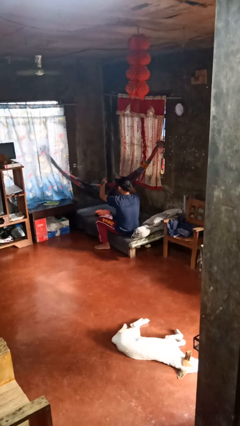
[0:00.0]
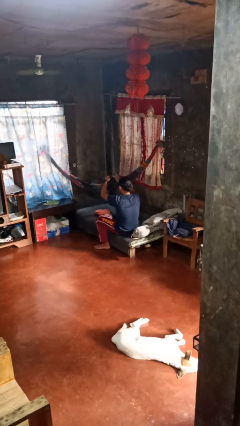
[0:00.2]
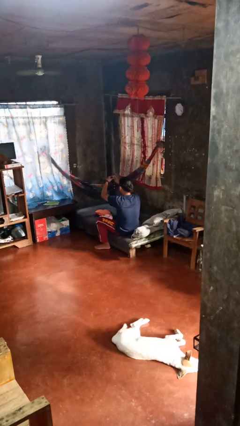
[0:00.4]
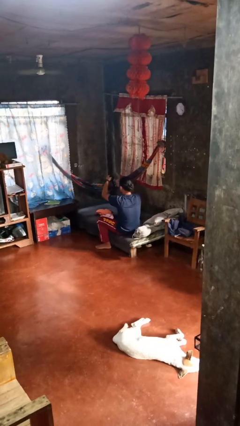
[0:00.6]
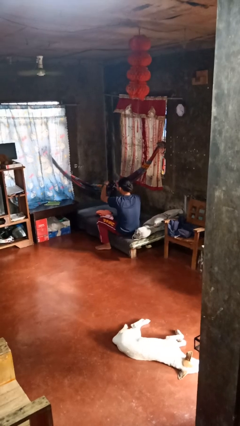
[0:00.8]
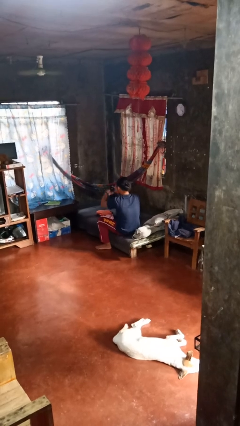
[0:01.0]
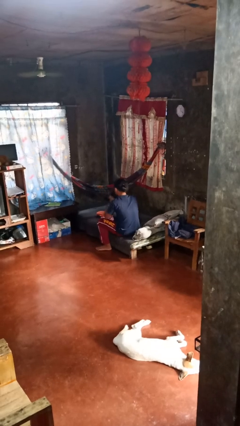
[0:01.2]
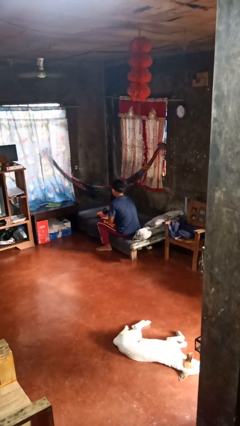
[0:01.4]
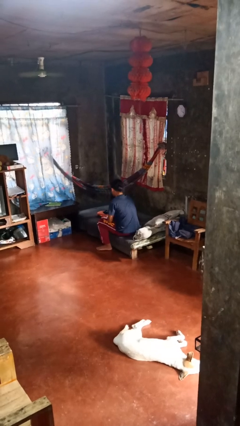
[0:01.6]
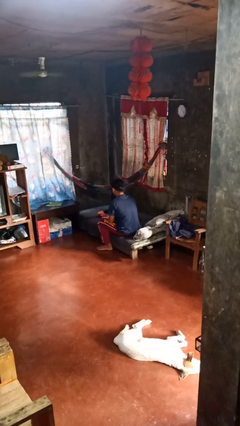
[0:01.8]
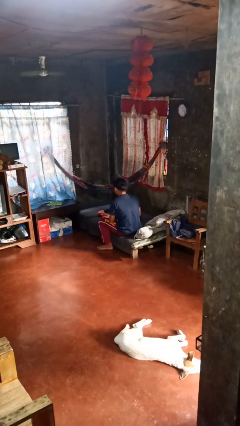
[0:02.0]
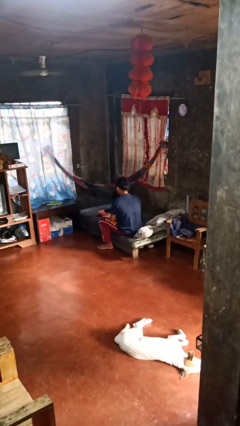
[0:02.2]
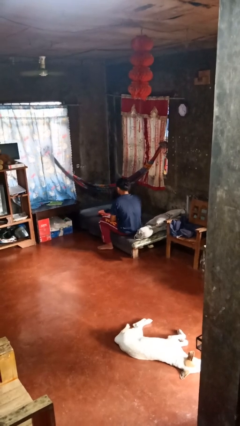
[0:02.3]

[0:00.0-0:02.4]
person folds socks

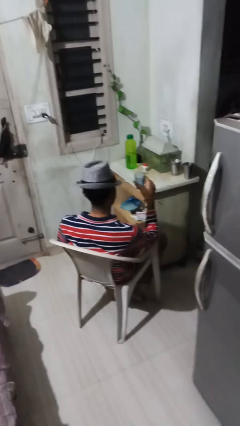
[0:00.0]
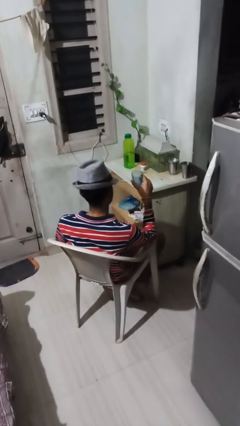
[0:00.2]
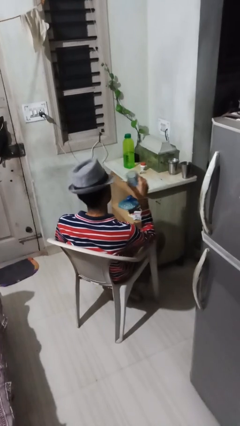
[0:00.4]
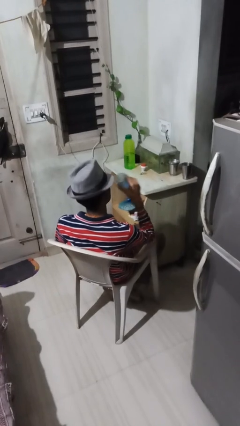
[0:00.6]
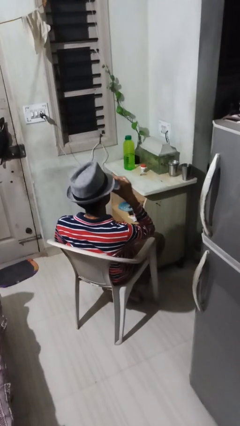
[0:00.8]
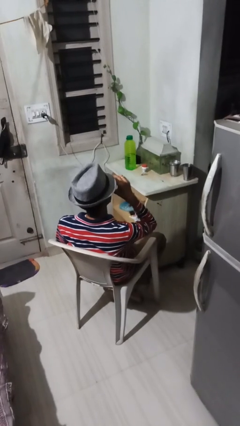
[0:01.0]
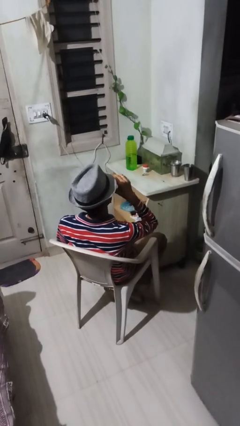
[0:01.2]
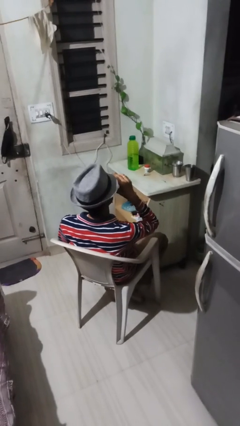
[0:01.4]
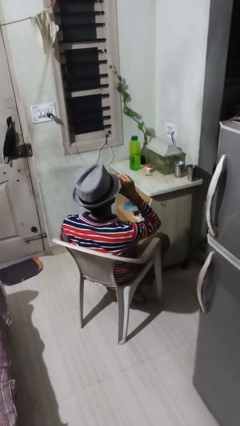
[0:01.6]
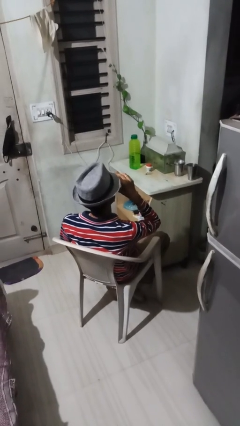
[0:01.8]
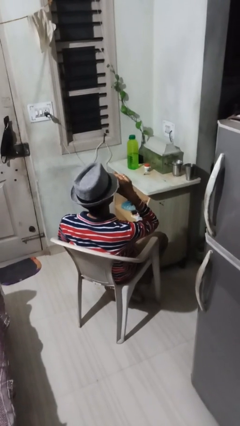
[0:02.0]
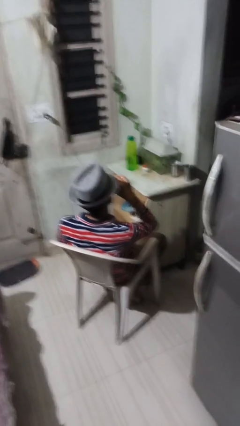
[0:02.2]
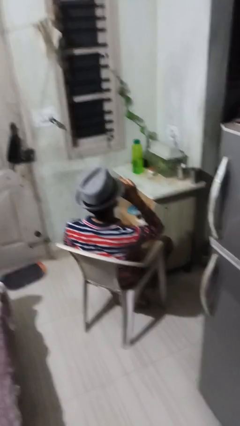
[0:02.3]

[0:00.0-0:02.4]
person drinks from shotglass

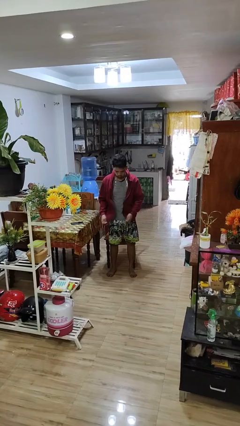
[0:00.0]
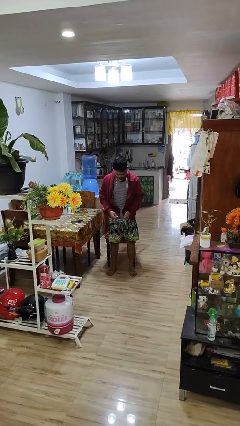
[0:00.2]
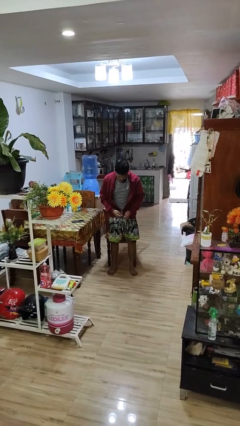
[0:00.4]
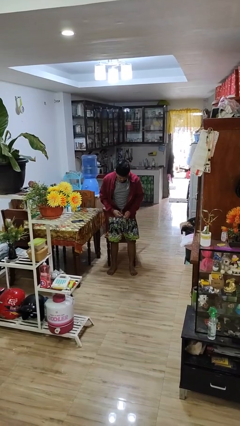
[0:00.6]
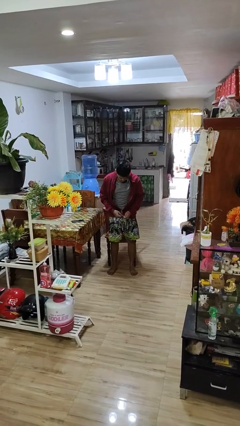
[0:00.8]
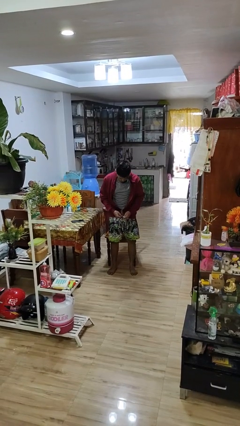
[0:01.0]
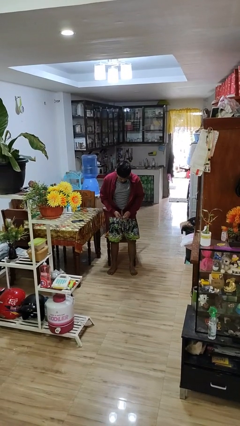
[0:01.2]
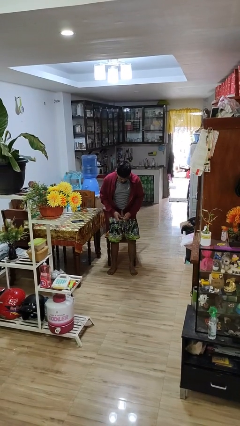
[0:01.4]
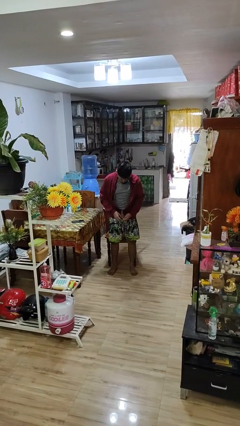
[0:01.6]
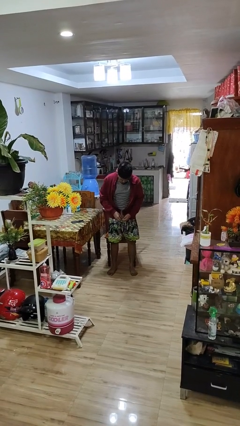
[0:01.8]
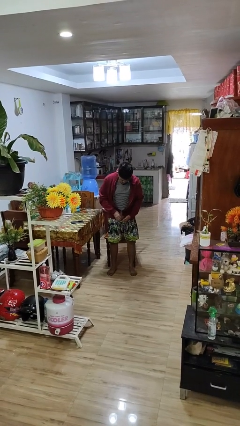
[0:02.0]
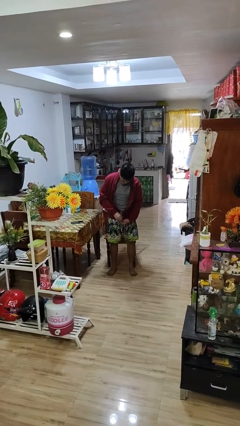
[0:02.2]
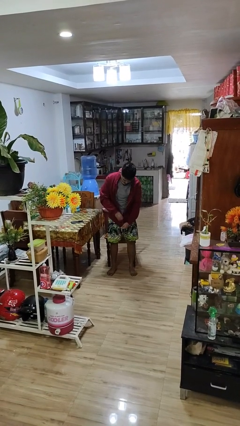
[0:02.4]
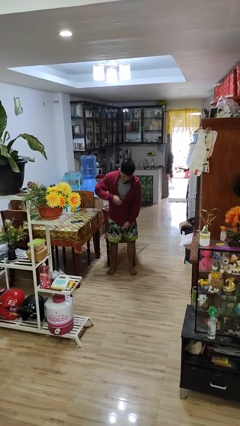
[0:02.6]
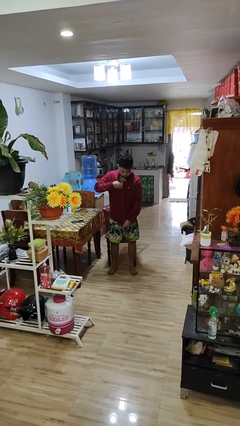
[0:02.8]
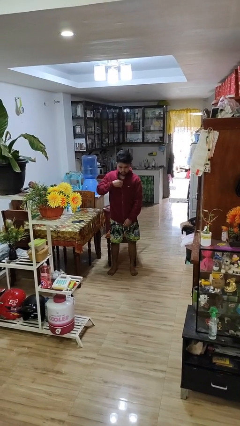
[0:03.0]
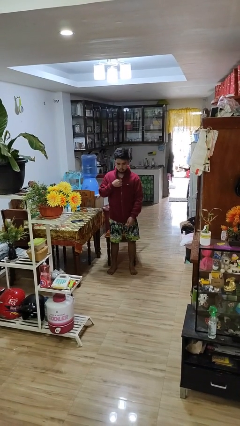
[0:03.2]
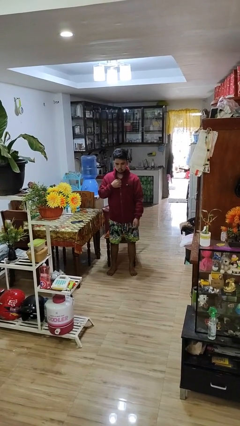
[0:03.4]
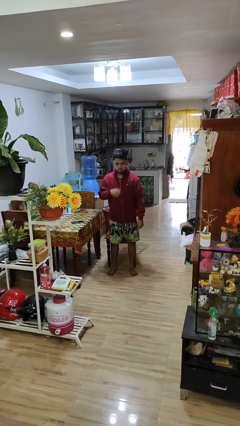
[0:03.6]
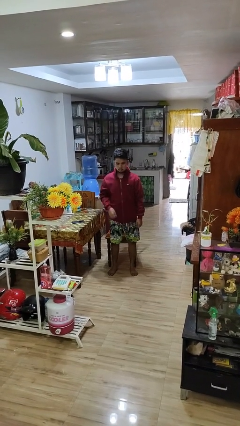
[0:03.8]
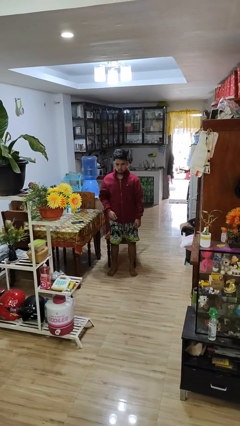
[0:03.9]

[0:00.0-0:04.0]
person zips up jacket

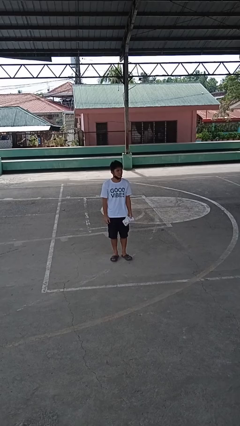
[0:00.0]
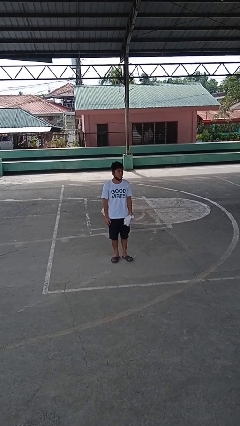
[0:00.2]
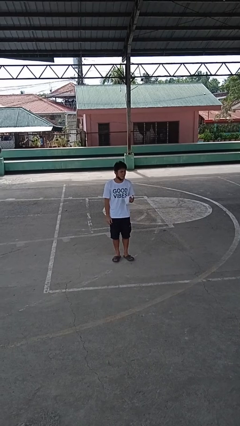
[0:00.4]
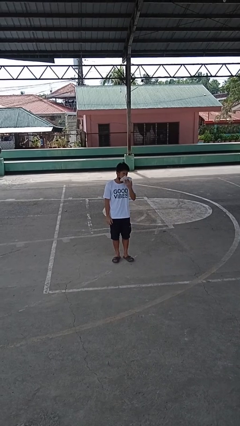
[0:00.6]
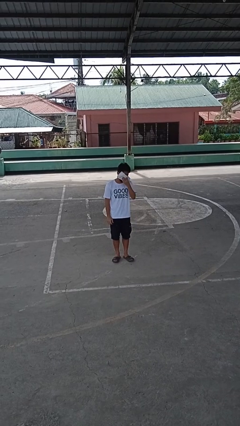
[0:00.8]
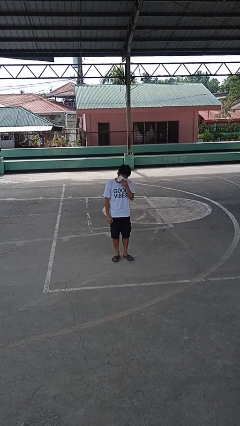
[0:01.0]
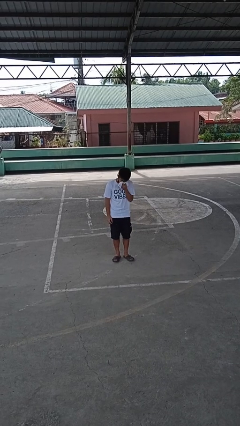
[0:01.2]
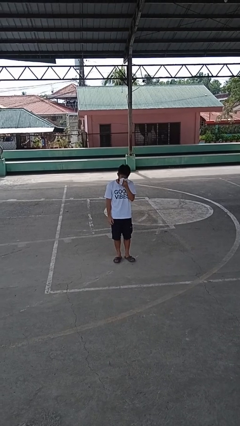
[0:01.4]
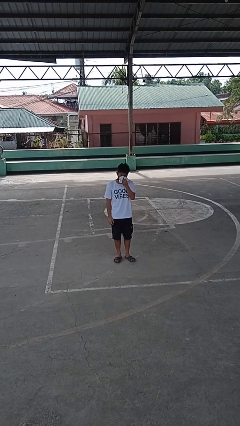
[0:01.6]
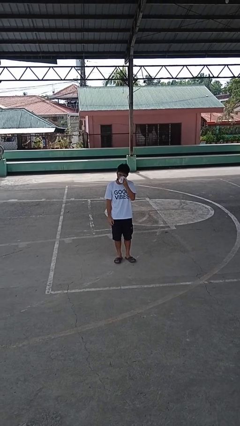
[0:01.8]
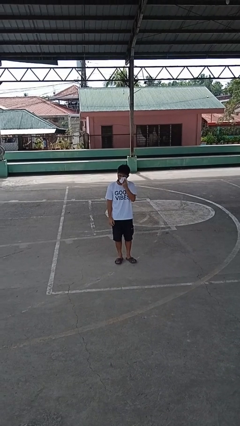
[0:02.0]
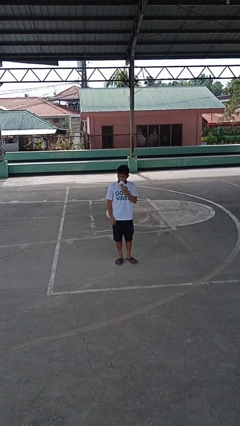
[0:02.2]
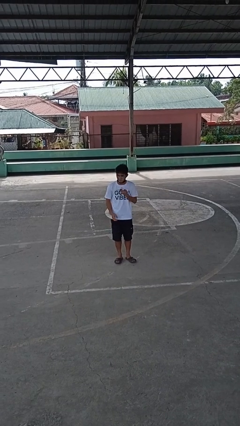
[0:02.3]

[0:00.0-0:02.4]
person blows nose

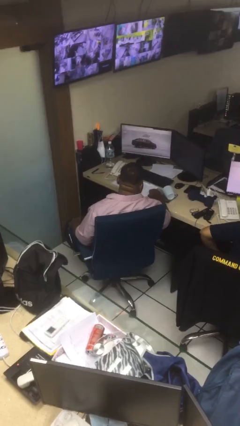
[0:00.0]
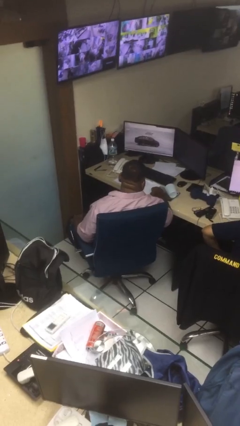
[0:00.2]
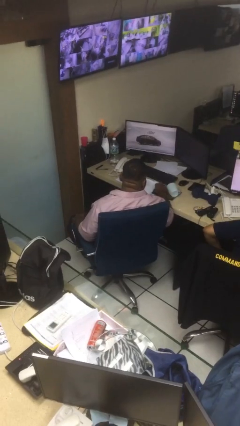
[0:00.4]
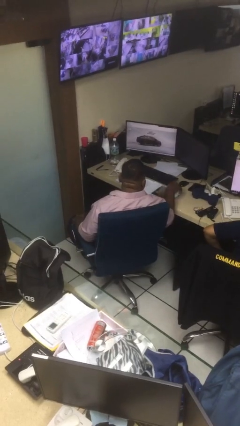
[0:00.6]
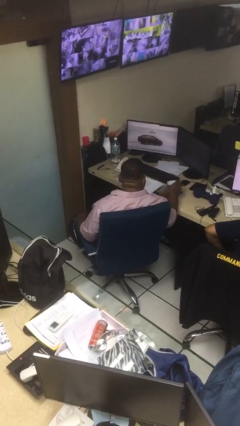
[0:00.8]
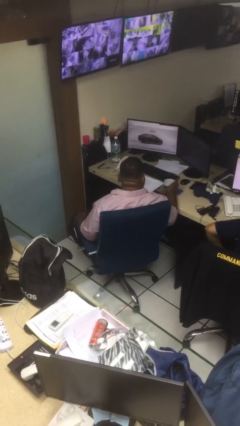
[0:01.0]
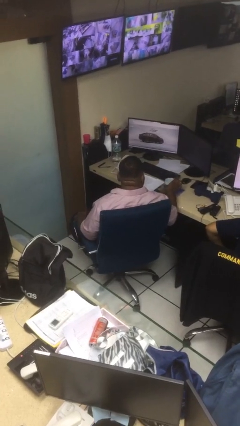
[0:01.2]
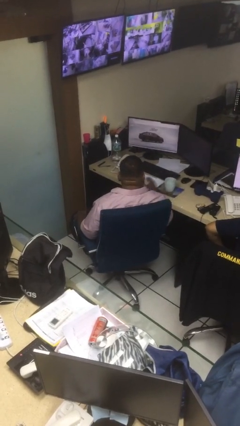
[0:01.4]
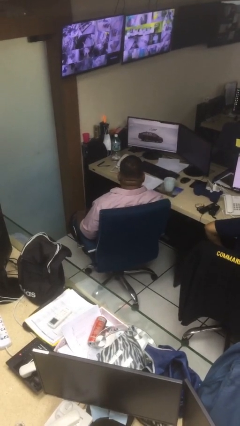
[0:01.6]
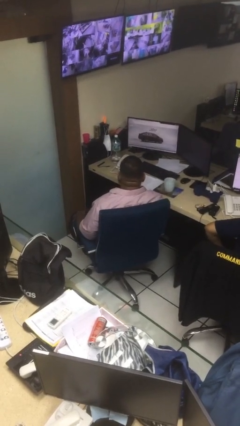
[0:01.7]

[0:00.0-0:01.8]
person sets upright glass

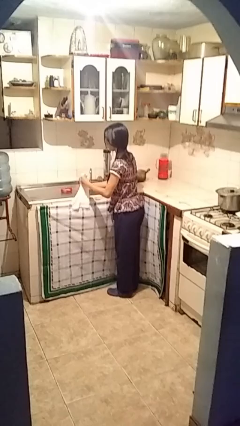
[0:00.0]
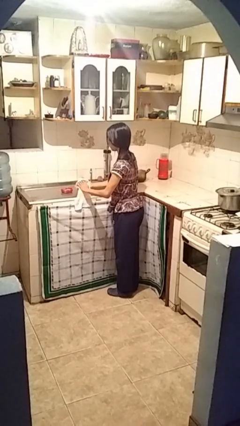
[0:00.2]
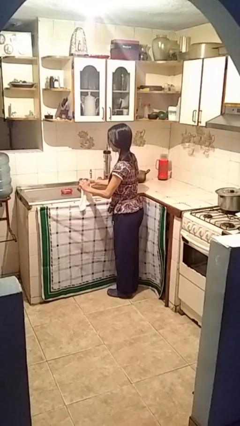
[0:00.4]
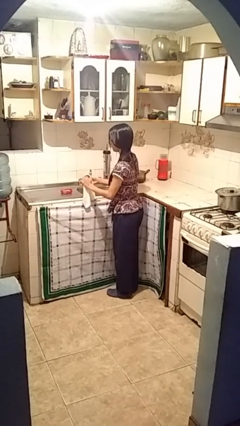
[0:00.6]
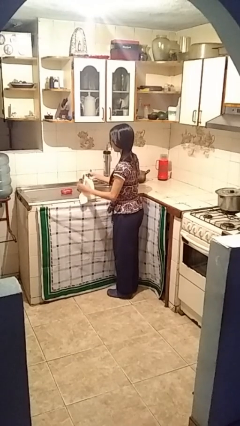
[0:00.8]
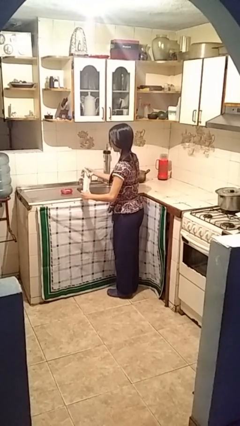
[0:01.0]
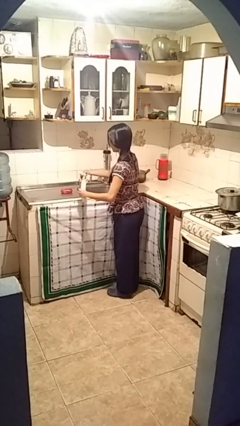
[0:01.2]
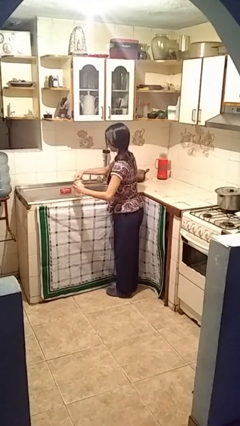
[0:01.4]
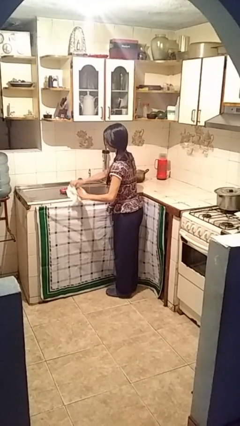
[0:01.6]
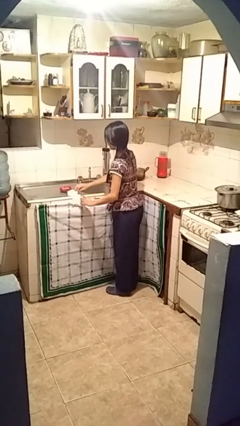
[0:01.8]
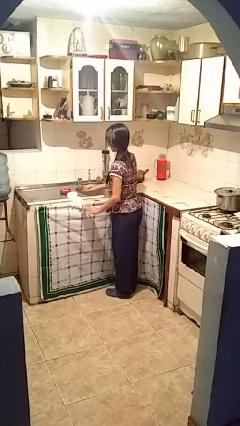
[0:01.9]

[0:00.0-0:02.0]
person dries hands with towel

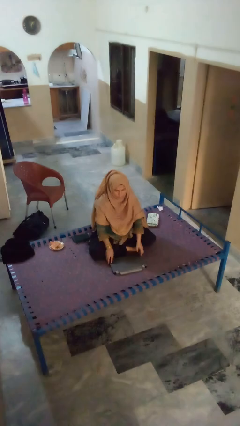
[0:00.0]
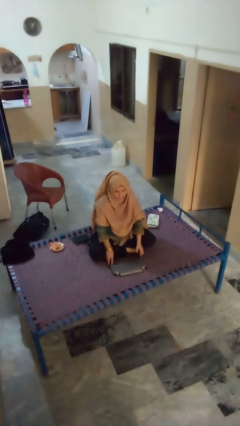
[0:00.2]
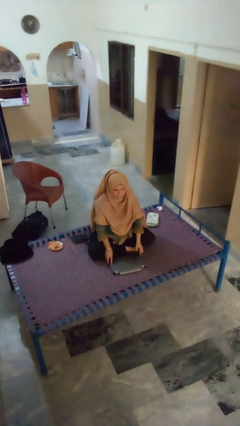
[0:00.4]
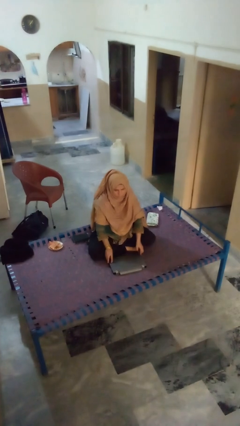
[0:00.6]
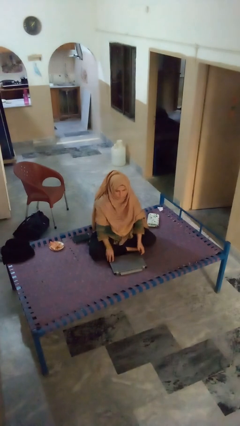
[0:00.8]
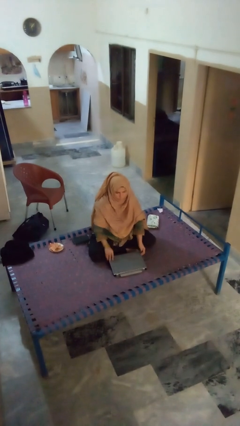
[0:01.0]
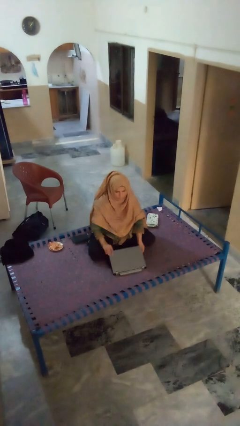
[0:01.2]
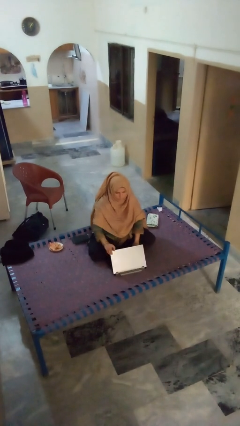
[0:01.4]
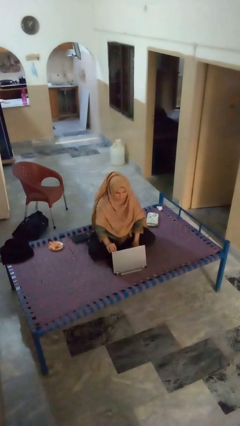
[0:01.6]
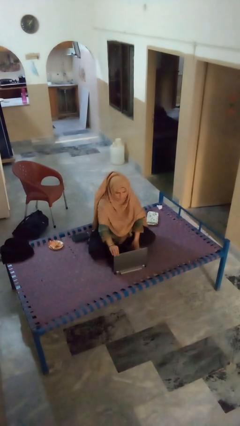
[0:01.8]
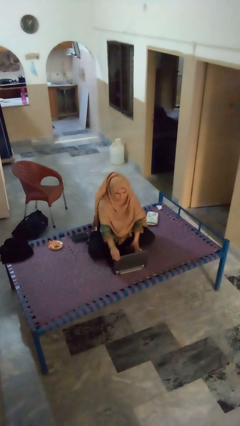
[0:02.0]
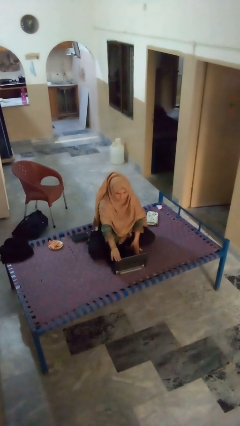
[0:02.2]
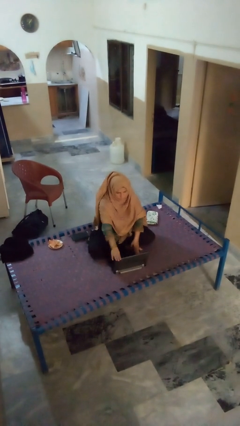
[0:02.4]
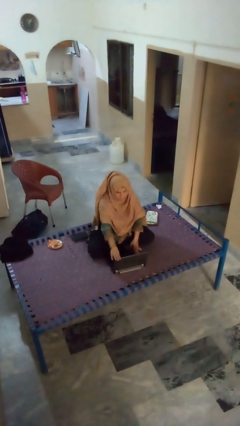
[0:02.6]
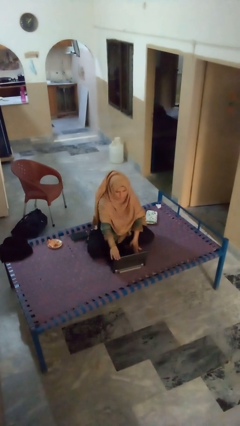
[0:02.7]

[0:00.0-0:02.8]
person opens laptop
